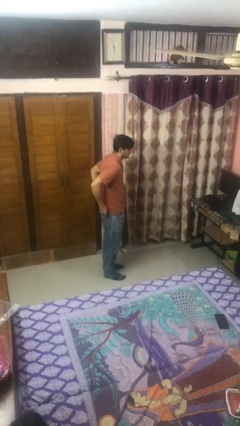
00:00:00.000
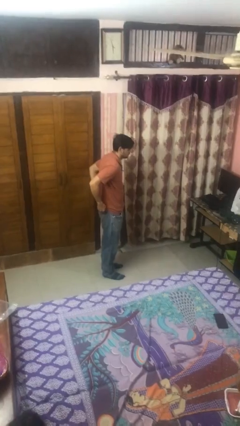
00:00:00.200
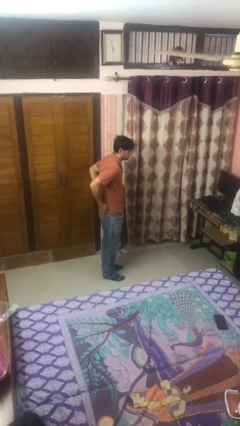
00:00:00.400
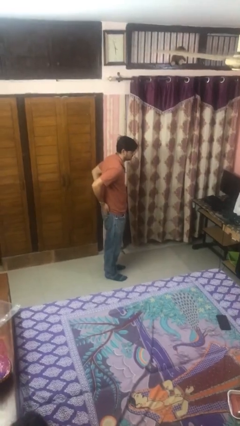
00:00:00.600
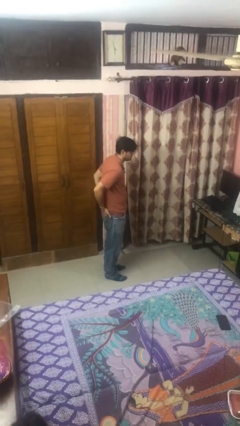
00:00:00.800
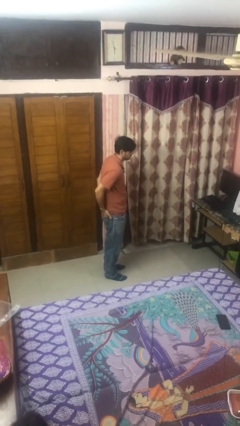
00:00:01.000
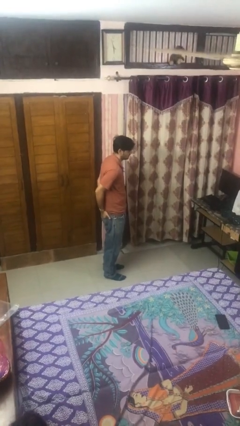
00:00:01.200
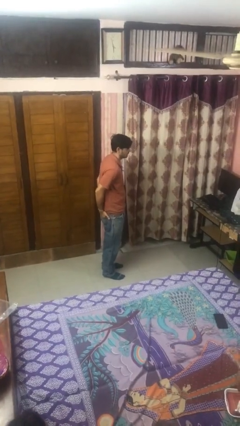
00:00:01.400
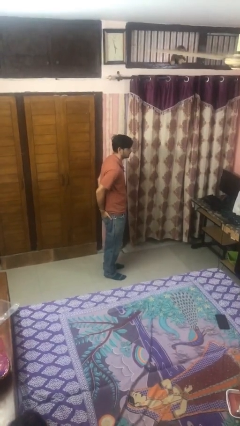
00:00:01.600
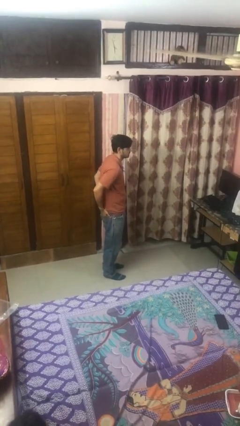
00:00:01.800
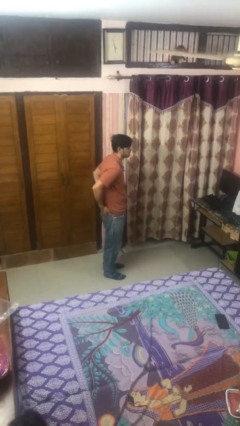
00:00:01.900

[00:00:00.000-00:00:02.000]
person puts hands in back pockets

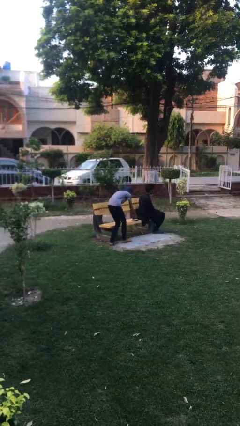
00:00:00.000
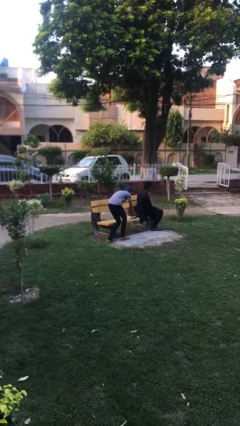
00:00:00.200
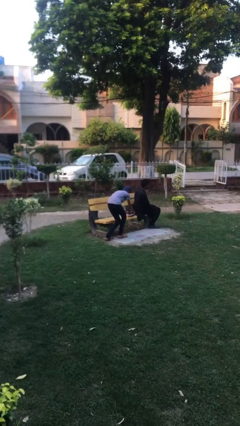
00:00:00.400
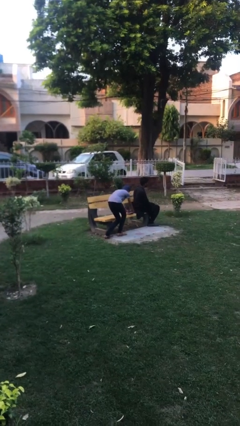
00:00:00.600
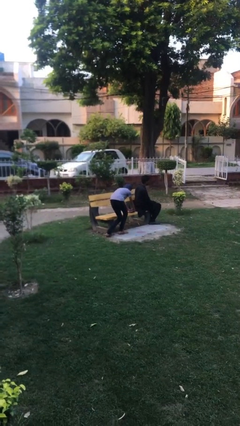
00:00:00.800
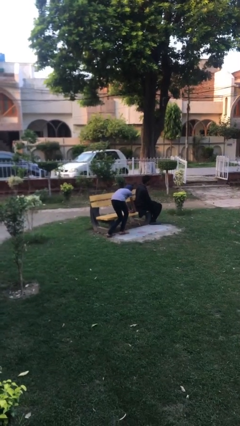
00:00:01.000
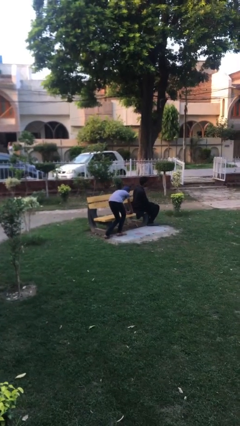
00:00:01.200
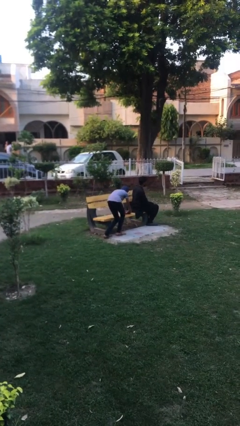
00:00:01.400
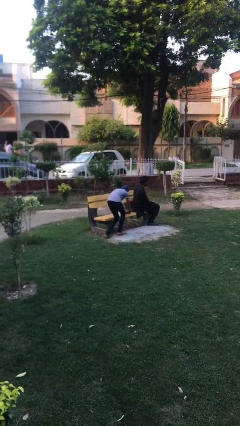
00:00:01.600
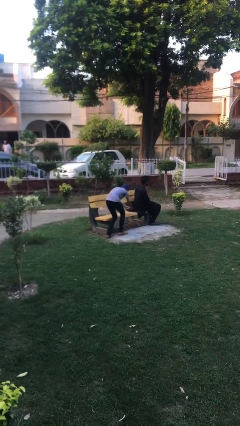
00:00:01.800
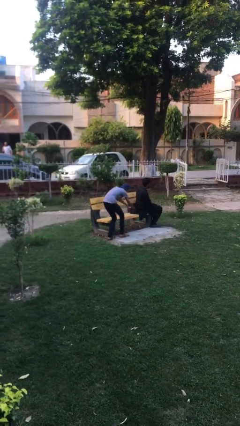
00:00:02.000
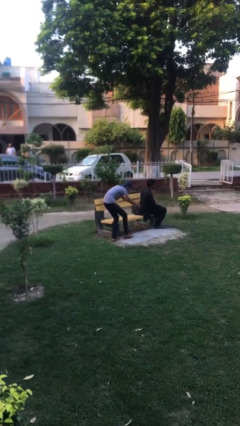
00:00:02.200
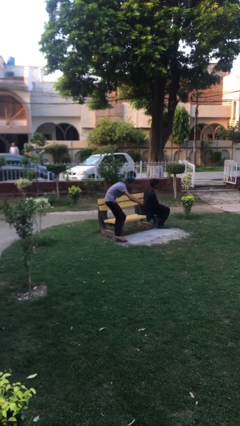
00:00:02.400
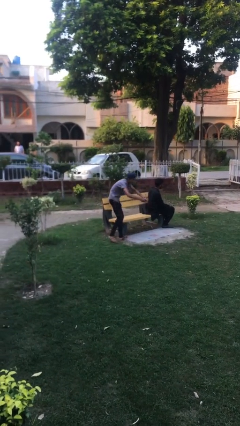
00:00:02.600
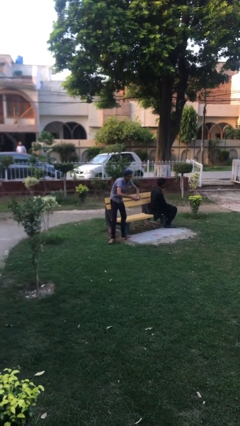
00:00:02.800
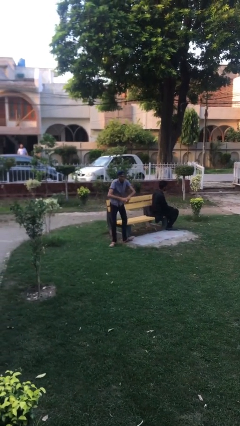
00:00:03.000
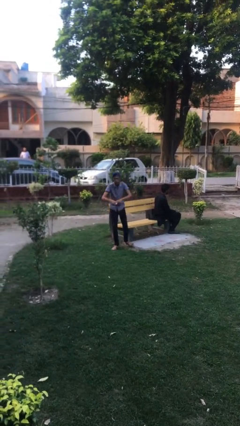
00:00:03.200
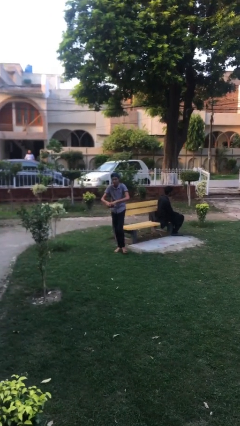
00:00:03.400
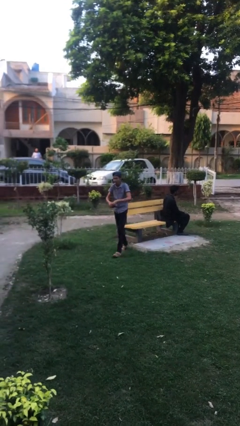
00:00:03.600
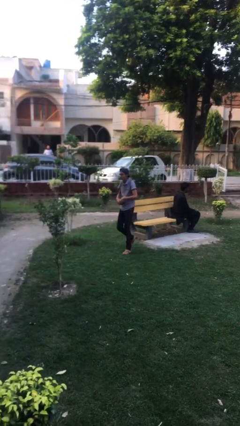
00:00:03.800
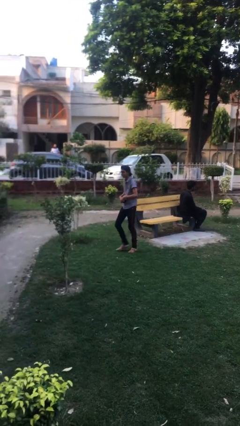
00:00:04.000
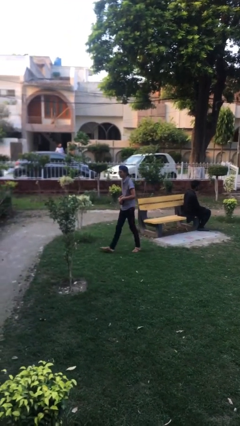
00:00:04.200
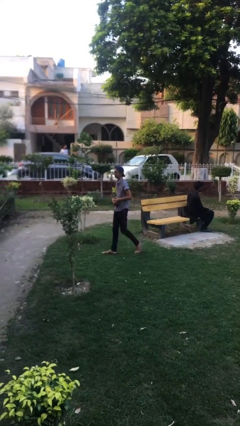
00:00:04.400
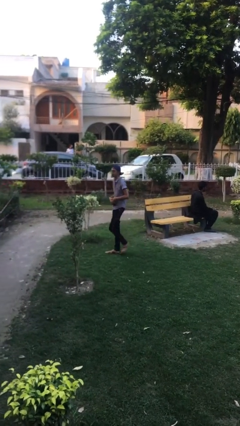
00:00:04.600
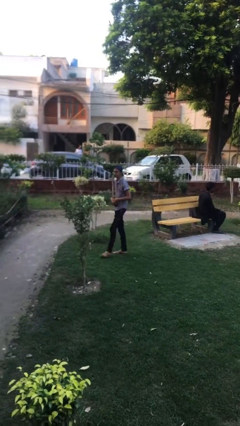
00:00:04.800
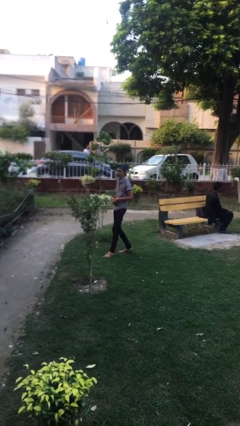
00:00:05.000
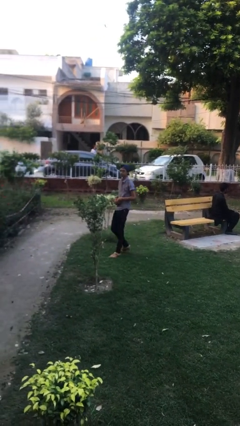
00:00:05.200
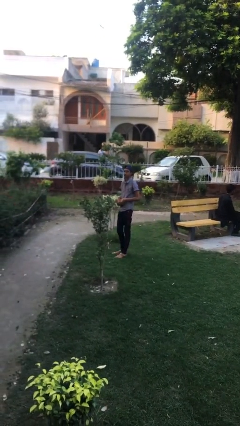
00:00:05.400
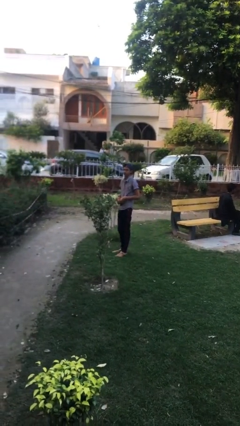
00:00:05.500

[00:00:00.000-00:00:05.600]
person steals object from person

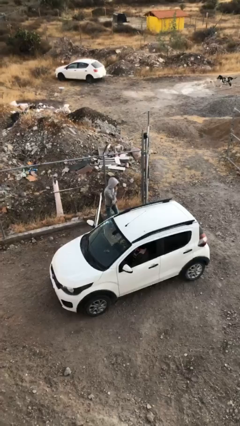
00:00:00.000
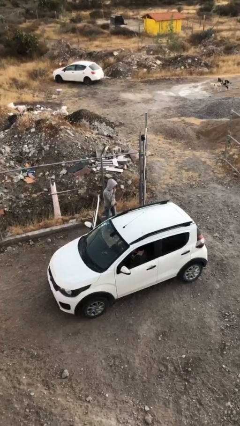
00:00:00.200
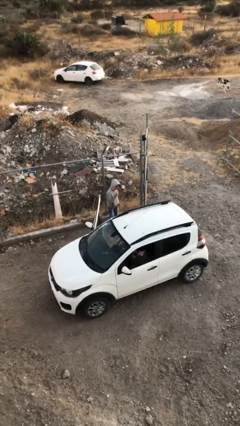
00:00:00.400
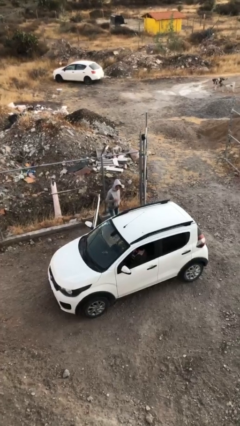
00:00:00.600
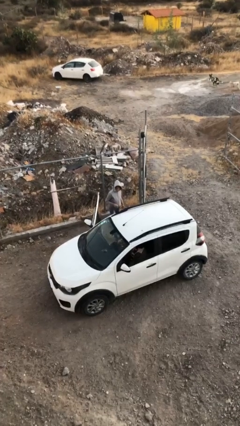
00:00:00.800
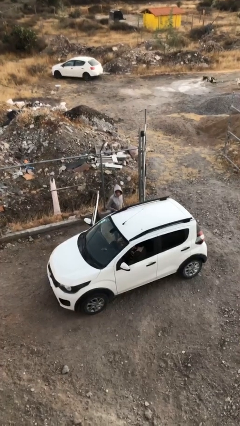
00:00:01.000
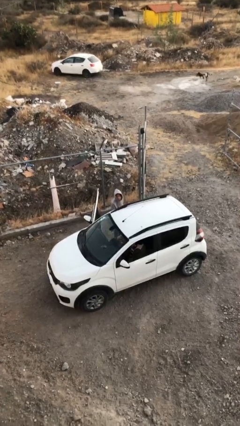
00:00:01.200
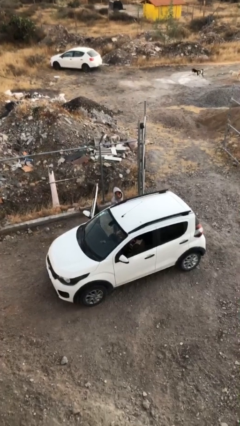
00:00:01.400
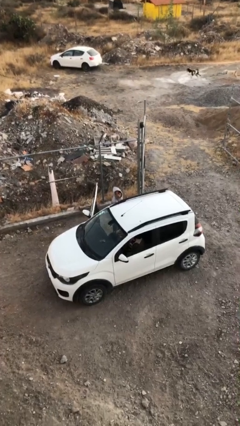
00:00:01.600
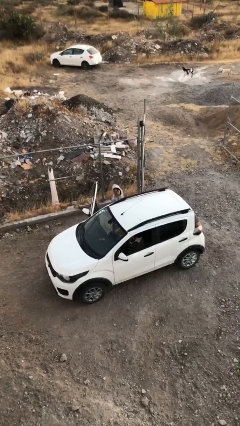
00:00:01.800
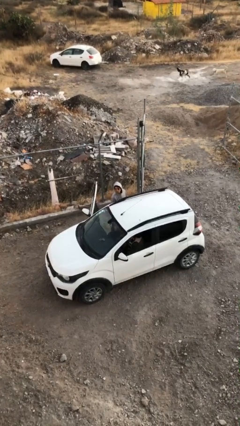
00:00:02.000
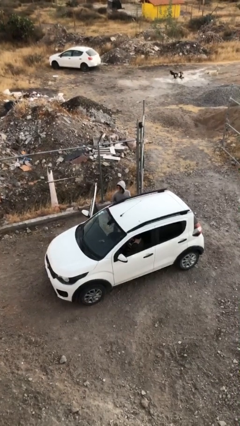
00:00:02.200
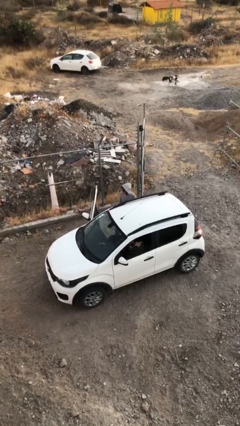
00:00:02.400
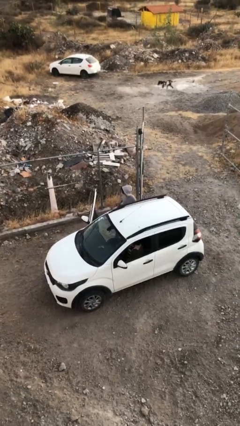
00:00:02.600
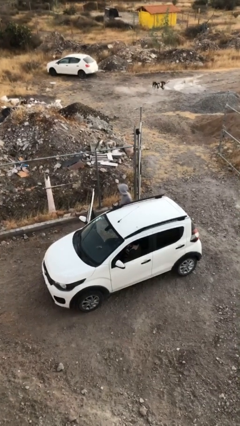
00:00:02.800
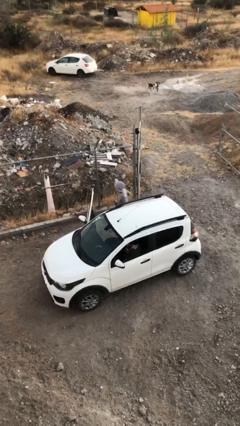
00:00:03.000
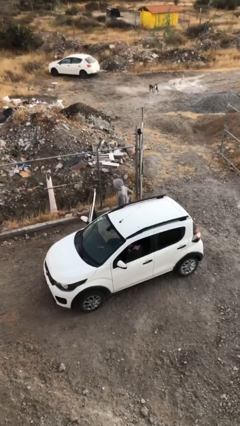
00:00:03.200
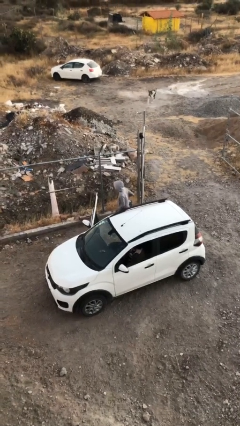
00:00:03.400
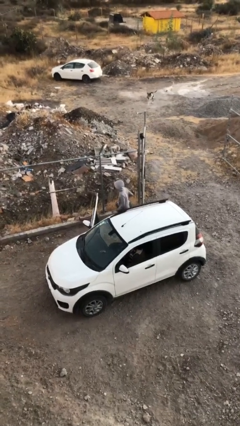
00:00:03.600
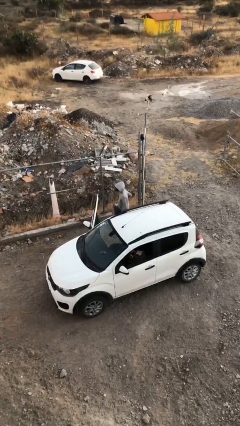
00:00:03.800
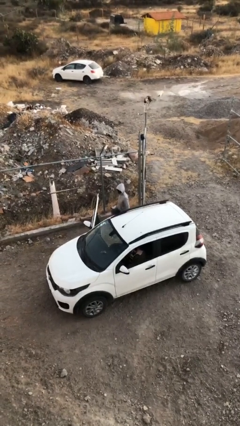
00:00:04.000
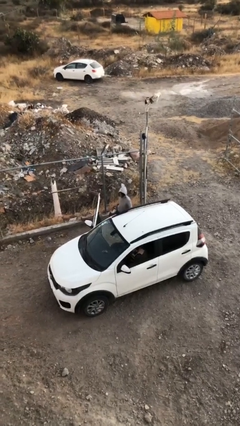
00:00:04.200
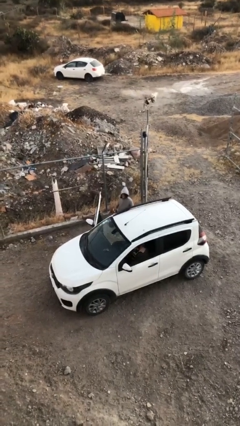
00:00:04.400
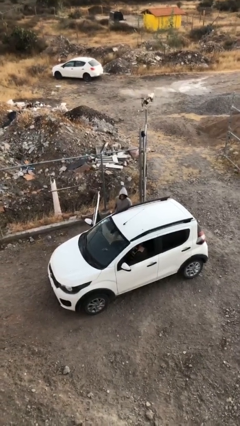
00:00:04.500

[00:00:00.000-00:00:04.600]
person unloads car

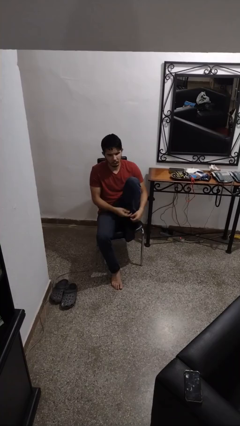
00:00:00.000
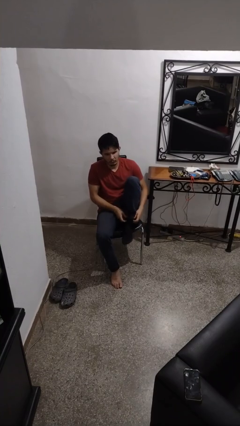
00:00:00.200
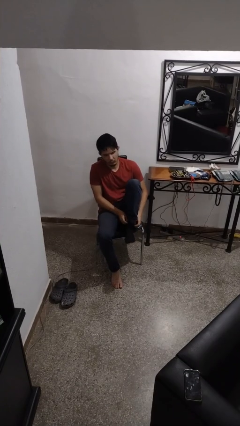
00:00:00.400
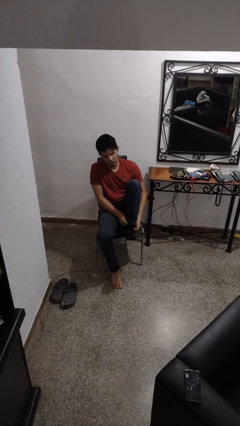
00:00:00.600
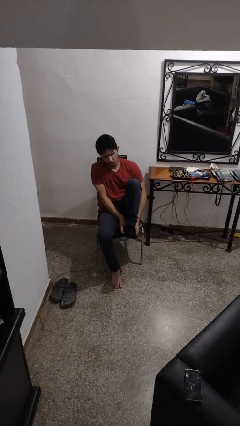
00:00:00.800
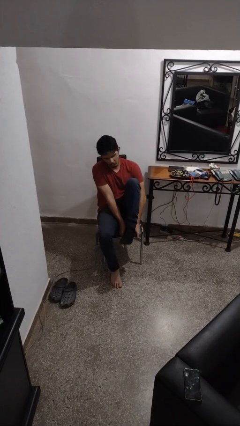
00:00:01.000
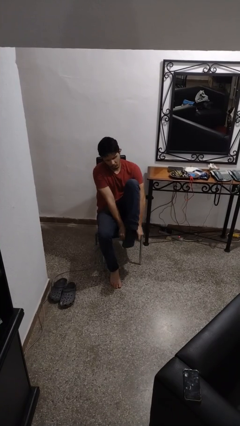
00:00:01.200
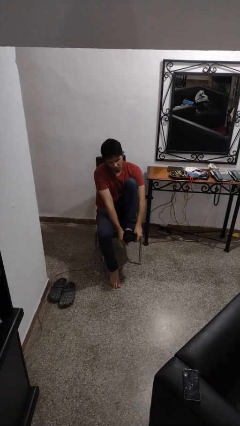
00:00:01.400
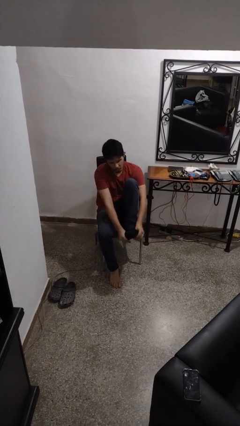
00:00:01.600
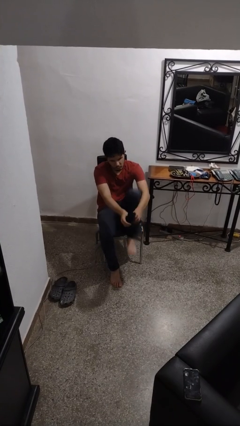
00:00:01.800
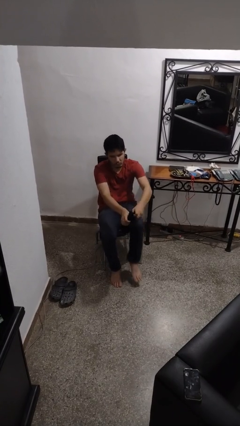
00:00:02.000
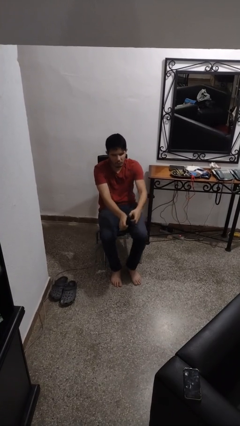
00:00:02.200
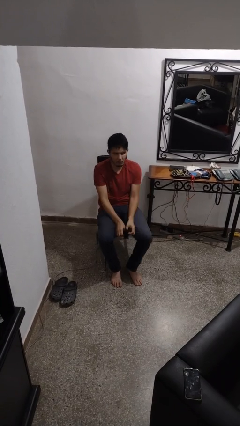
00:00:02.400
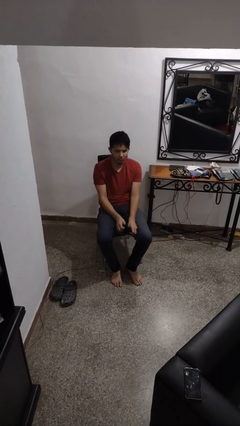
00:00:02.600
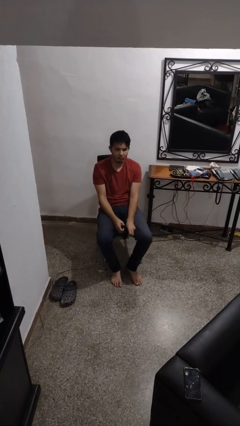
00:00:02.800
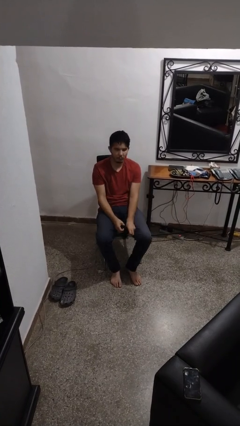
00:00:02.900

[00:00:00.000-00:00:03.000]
person takes off socks

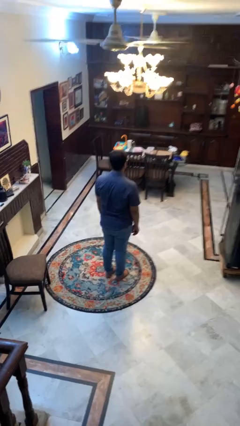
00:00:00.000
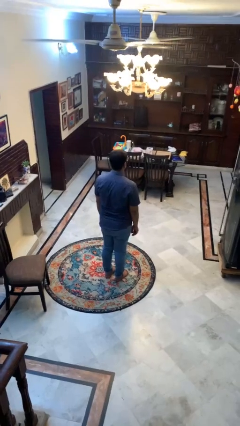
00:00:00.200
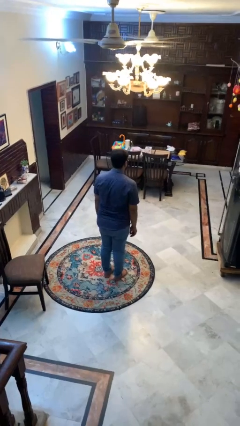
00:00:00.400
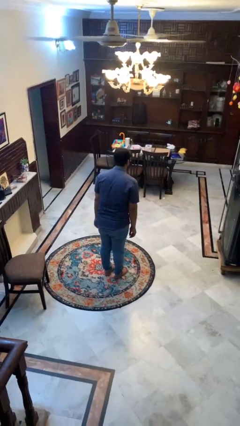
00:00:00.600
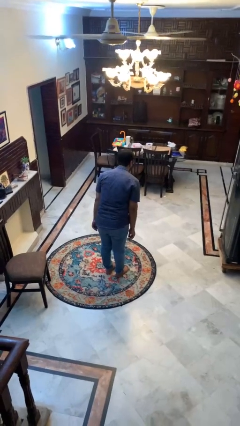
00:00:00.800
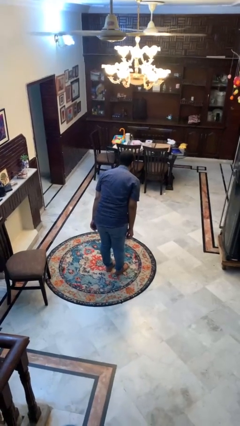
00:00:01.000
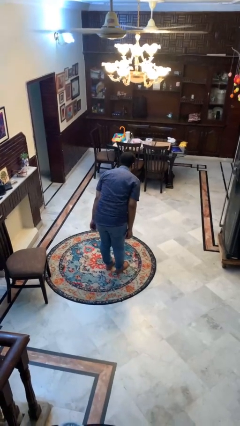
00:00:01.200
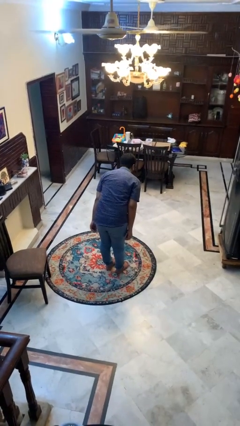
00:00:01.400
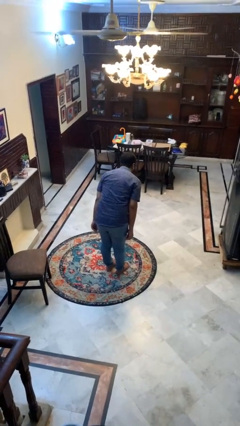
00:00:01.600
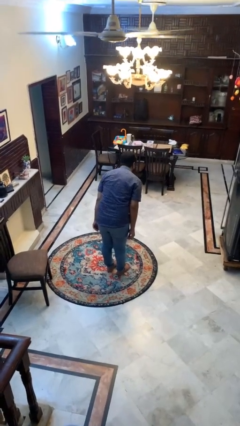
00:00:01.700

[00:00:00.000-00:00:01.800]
person bows

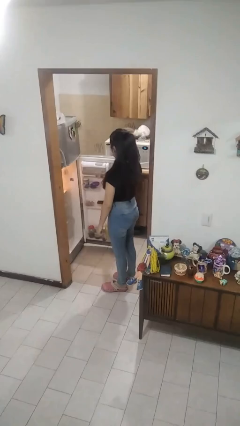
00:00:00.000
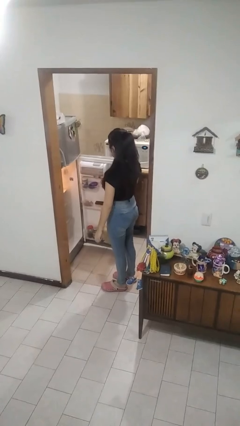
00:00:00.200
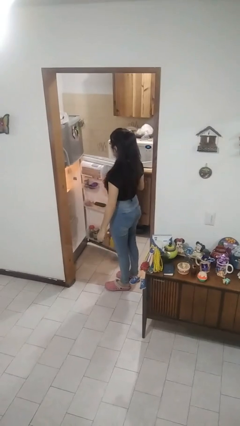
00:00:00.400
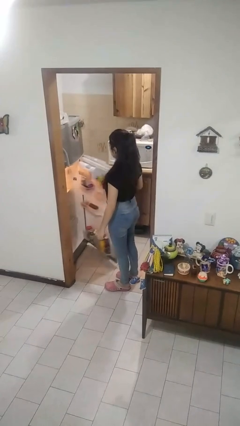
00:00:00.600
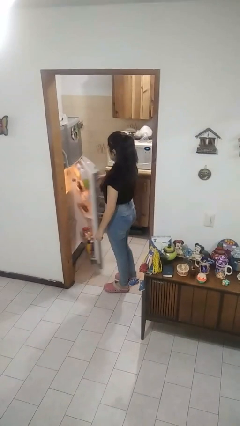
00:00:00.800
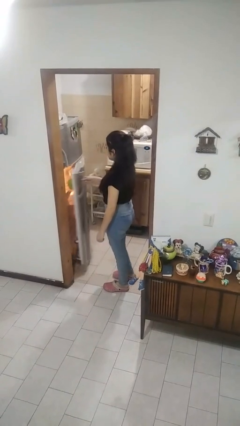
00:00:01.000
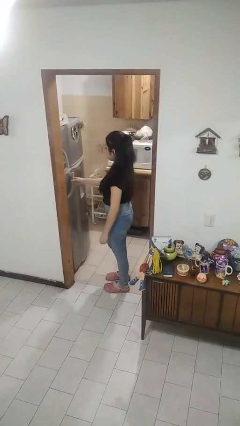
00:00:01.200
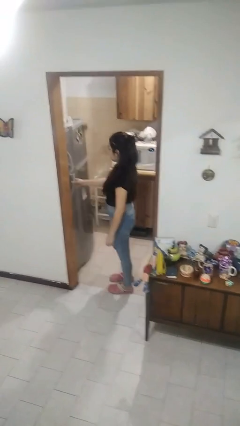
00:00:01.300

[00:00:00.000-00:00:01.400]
person closes refrigerator
